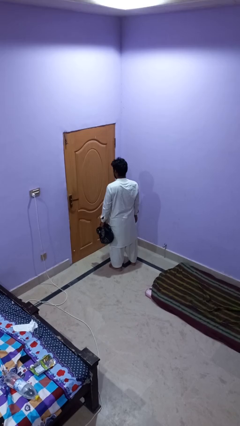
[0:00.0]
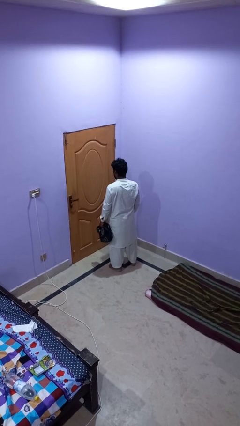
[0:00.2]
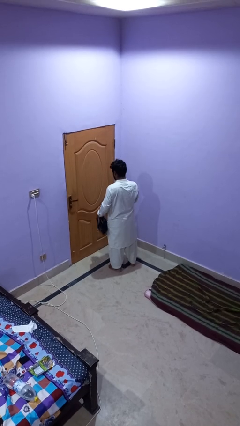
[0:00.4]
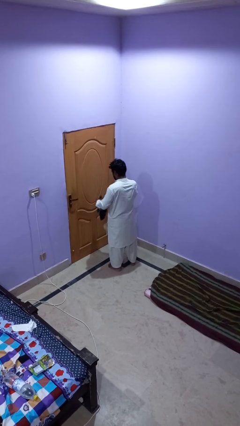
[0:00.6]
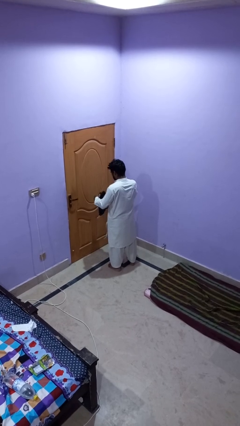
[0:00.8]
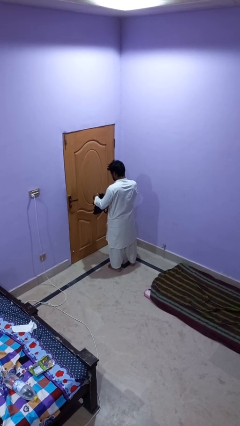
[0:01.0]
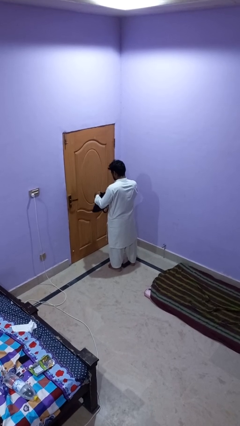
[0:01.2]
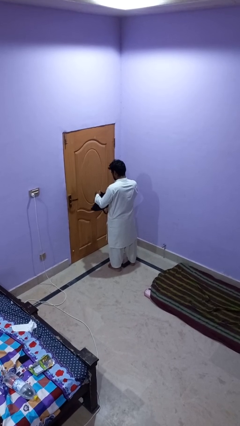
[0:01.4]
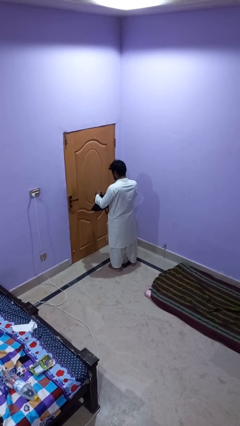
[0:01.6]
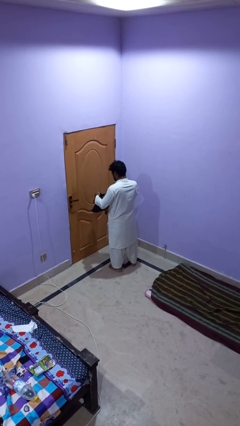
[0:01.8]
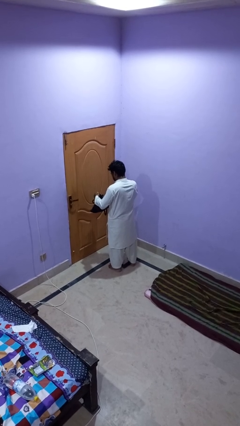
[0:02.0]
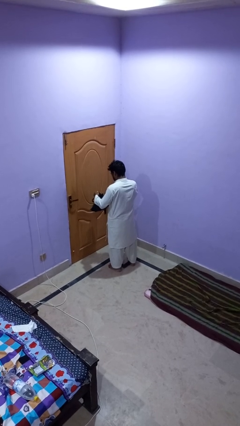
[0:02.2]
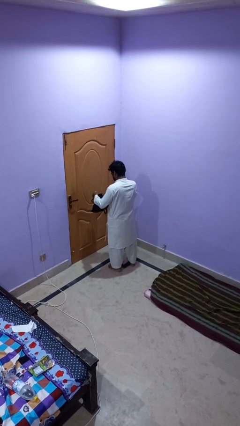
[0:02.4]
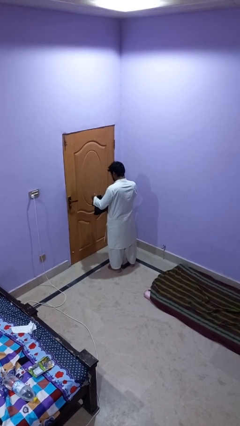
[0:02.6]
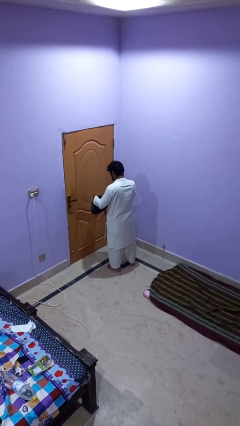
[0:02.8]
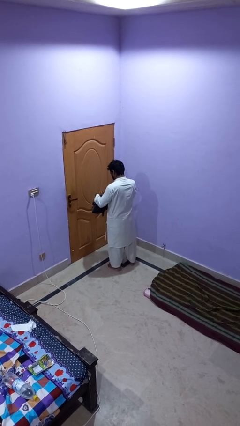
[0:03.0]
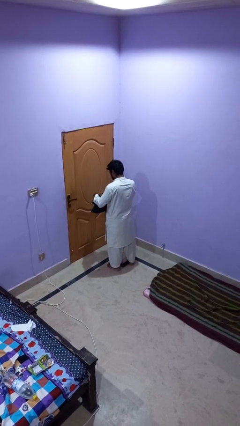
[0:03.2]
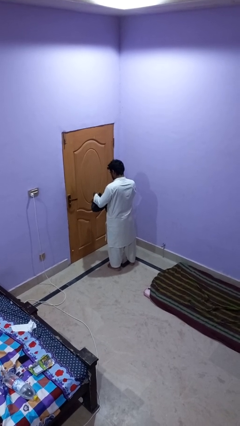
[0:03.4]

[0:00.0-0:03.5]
person searches in purse

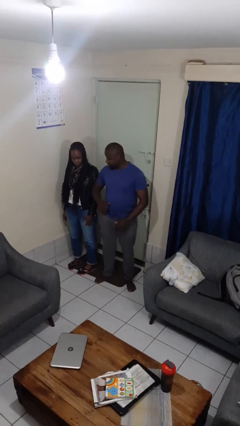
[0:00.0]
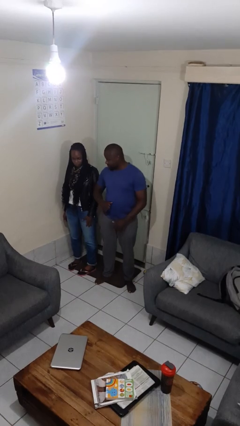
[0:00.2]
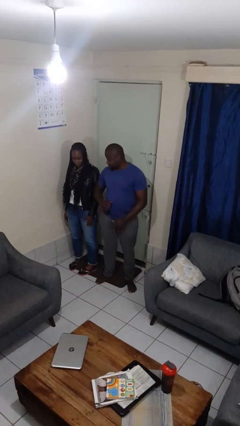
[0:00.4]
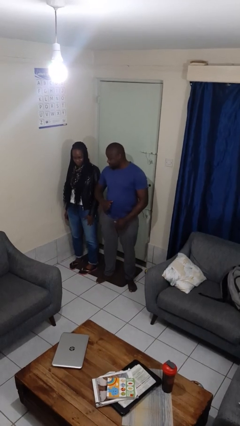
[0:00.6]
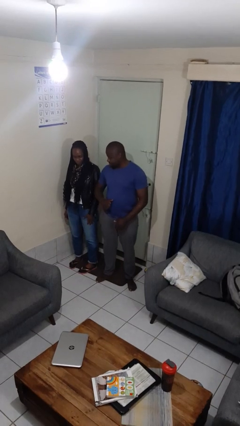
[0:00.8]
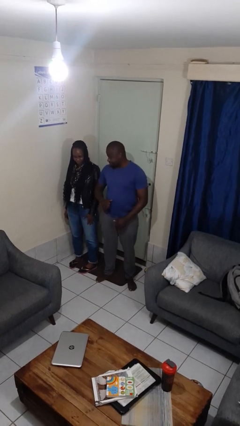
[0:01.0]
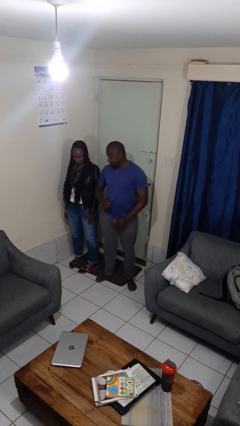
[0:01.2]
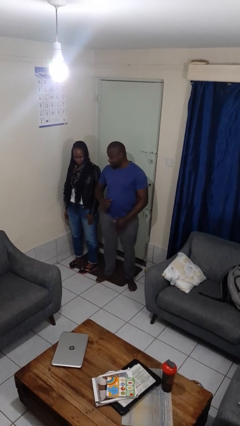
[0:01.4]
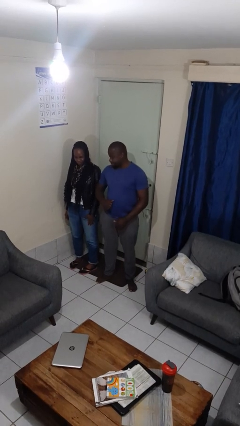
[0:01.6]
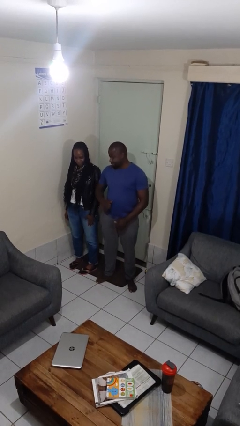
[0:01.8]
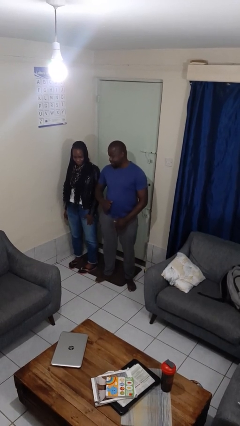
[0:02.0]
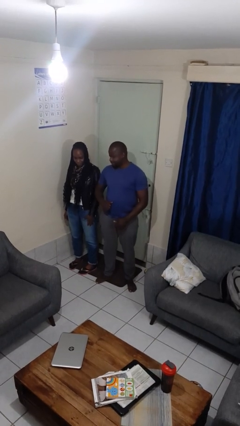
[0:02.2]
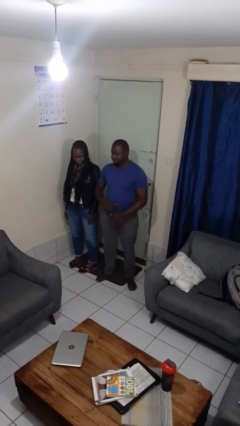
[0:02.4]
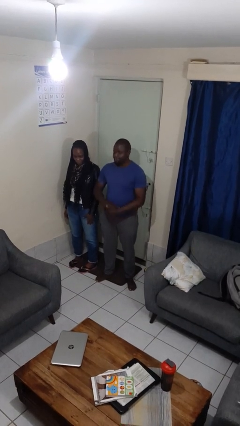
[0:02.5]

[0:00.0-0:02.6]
person nudges person with elbow

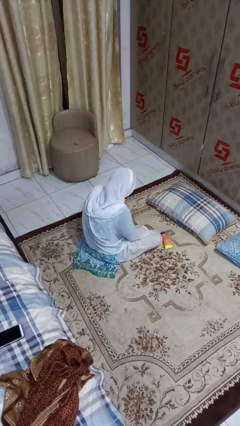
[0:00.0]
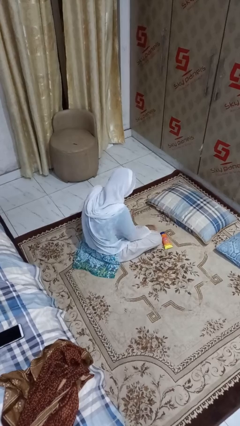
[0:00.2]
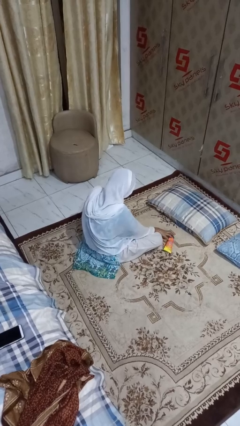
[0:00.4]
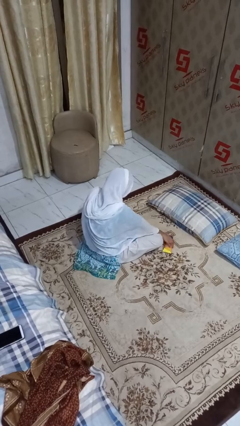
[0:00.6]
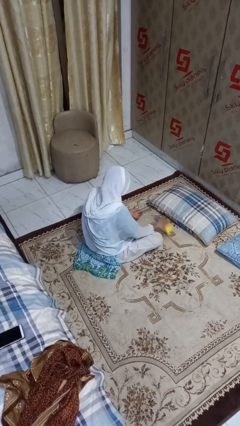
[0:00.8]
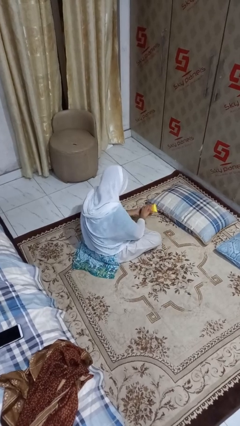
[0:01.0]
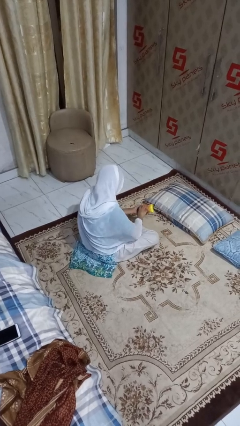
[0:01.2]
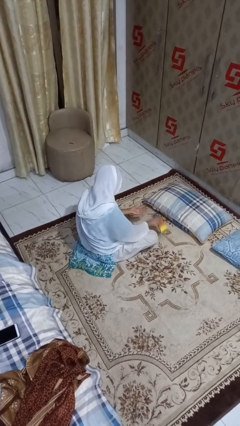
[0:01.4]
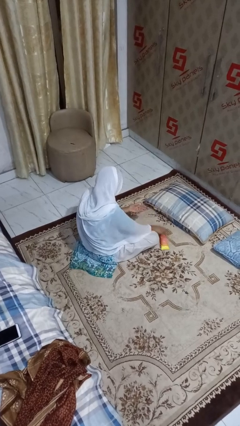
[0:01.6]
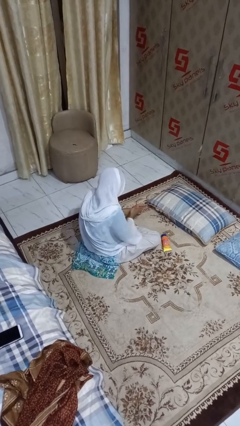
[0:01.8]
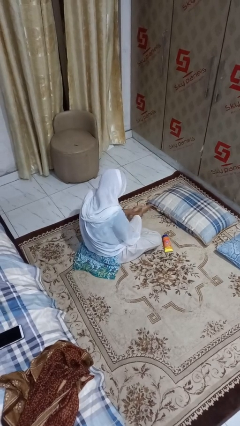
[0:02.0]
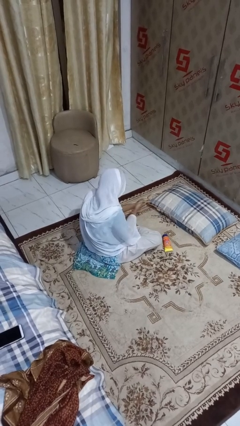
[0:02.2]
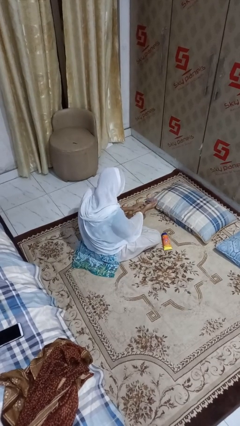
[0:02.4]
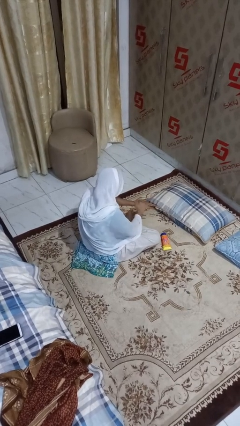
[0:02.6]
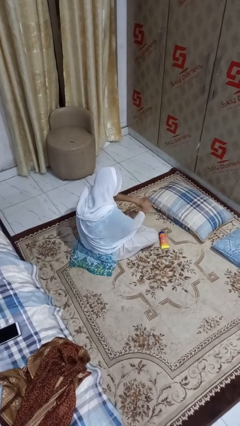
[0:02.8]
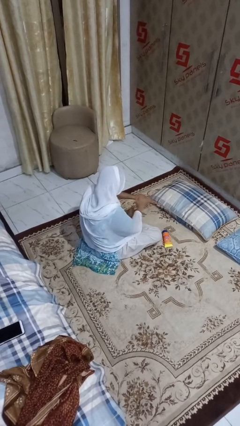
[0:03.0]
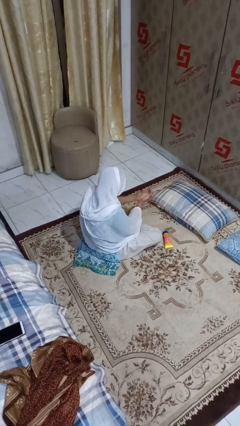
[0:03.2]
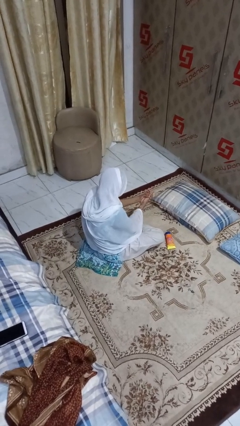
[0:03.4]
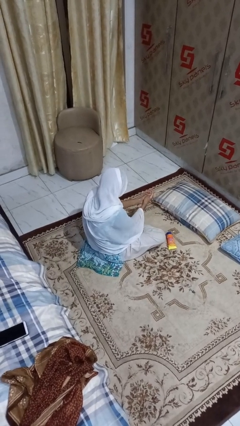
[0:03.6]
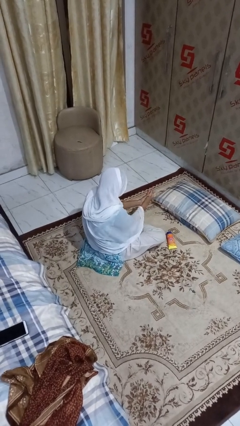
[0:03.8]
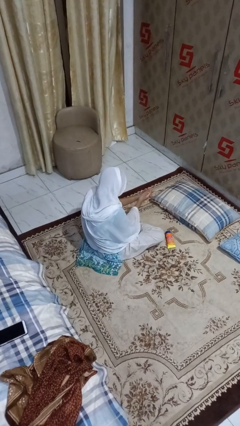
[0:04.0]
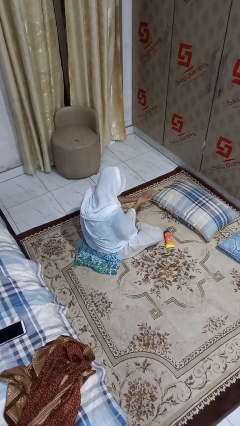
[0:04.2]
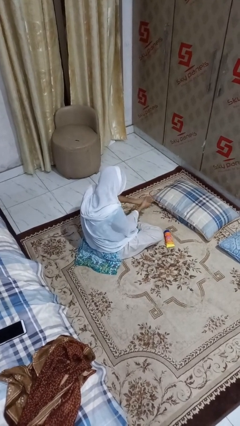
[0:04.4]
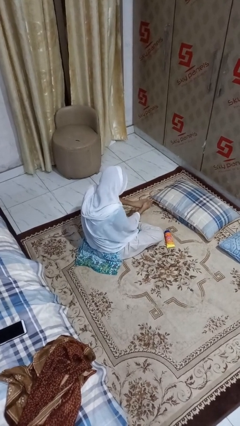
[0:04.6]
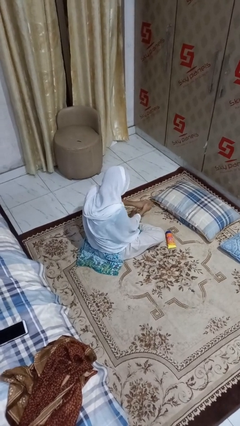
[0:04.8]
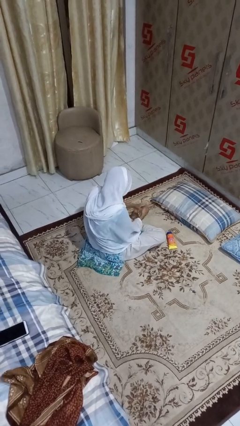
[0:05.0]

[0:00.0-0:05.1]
person applies sunscreen

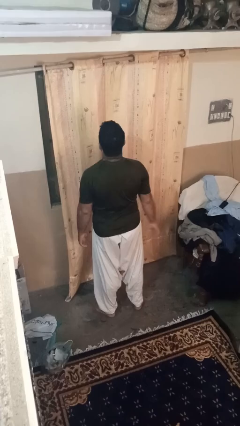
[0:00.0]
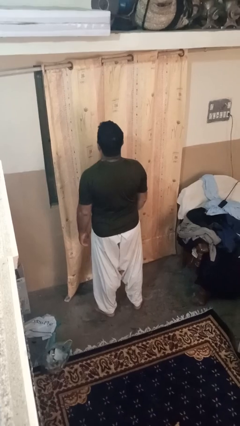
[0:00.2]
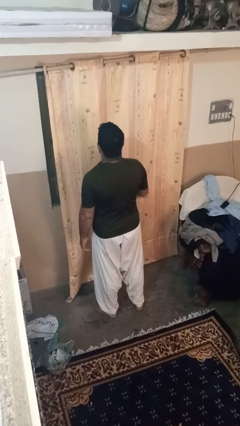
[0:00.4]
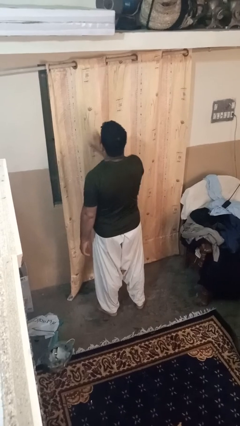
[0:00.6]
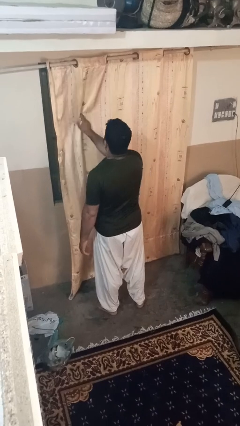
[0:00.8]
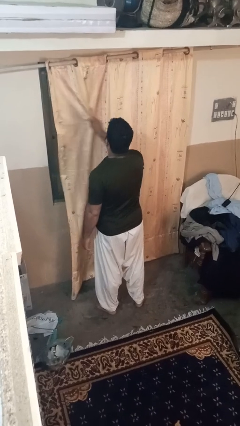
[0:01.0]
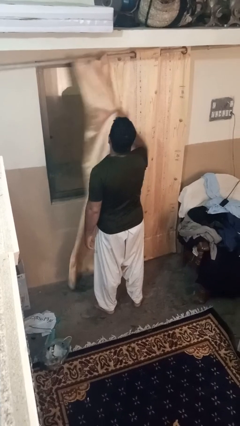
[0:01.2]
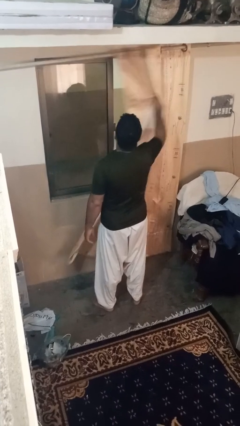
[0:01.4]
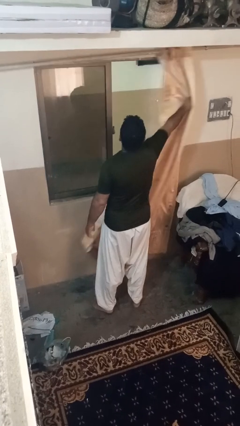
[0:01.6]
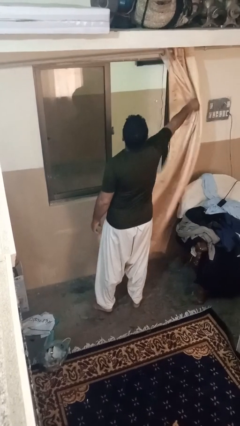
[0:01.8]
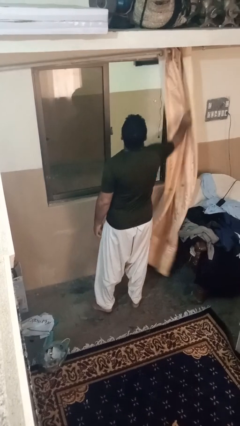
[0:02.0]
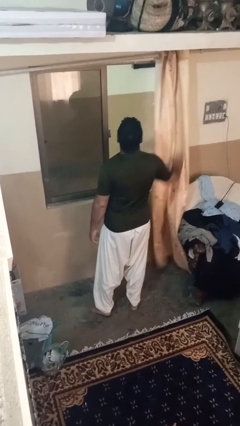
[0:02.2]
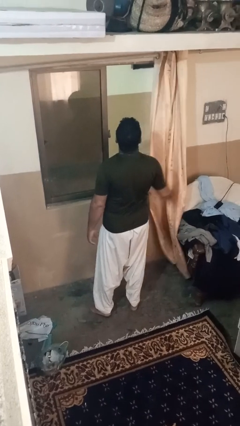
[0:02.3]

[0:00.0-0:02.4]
person opens curtains

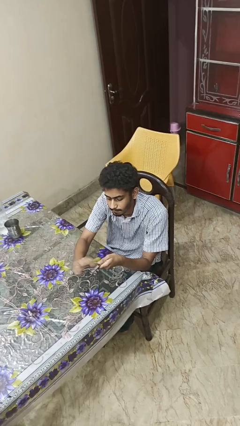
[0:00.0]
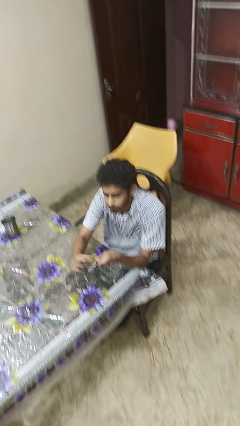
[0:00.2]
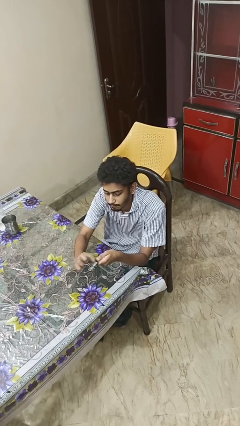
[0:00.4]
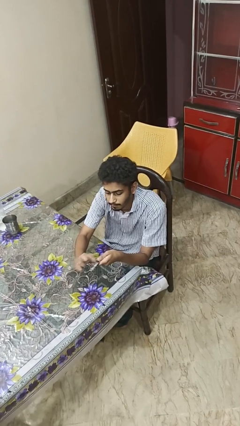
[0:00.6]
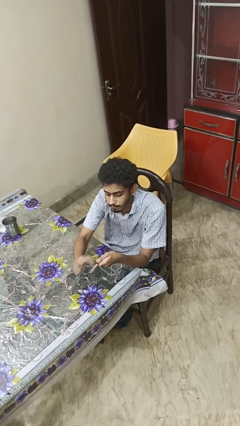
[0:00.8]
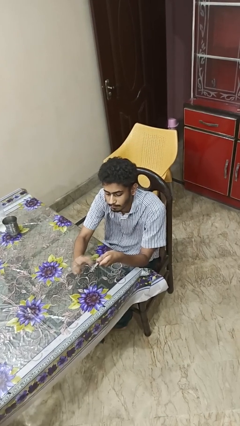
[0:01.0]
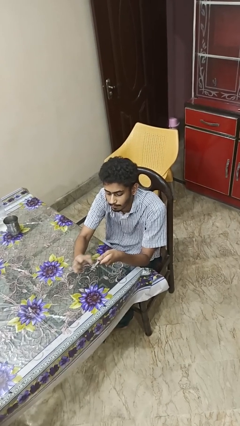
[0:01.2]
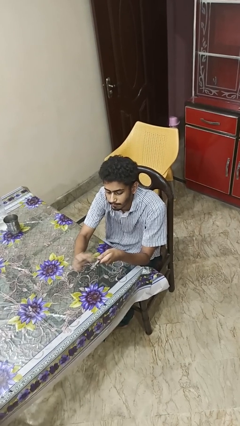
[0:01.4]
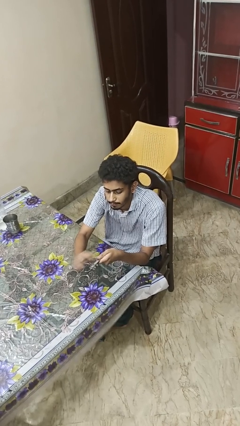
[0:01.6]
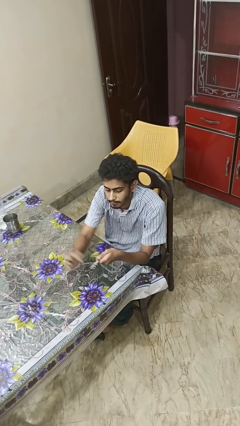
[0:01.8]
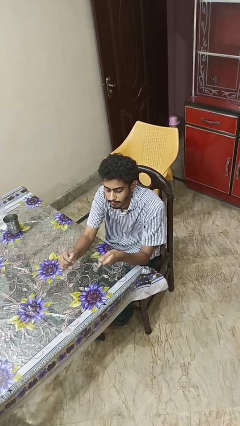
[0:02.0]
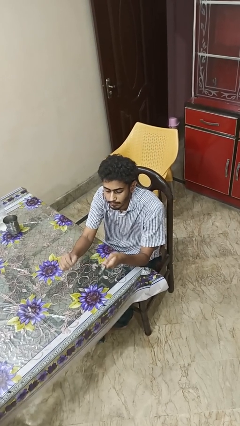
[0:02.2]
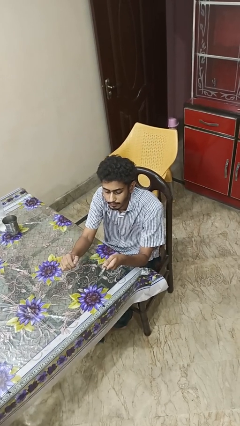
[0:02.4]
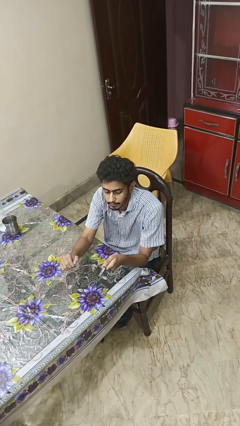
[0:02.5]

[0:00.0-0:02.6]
person files fingernails

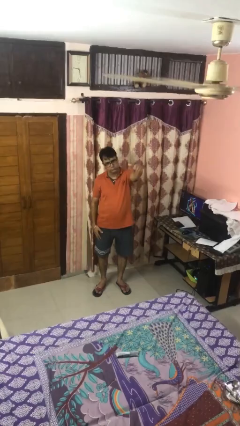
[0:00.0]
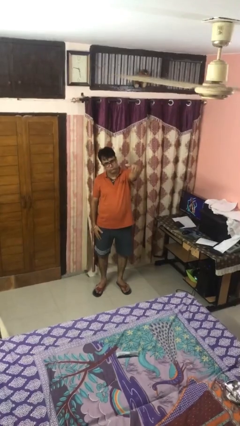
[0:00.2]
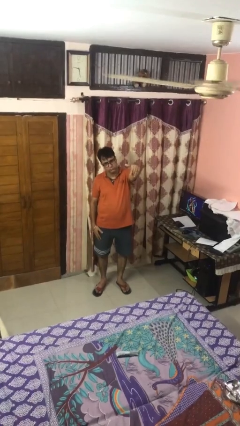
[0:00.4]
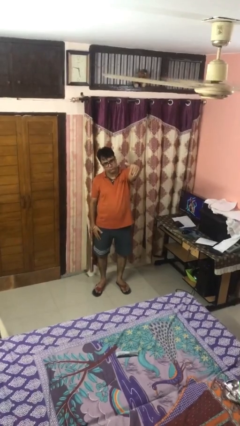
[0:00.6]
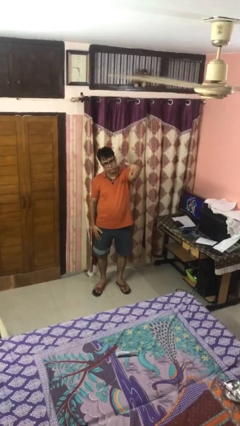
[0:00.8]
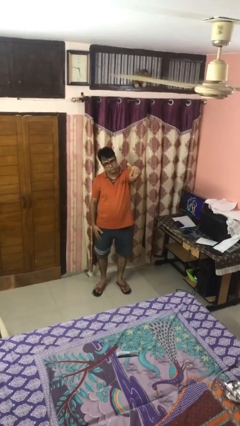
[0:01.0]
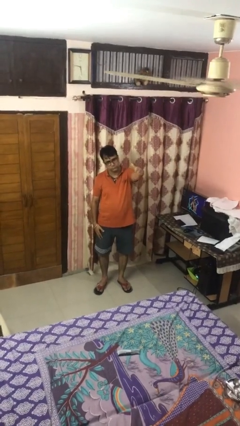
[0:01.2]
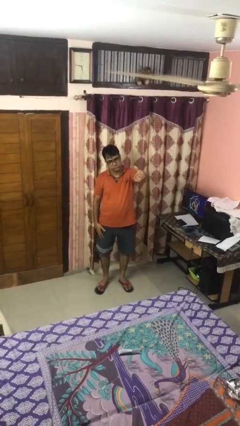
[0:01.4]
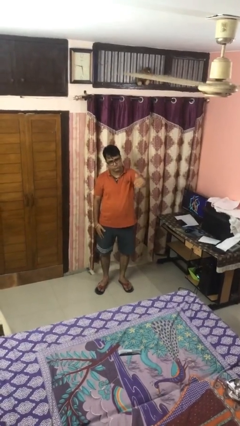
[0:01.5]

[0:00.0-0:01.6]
person gestures come here
